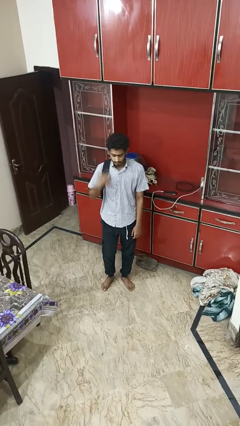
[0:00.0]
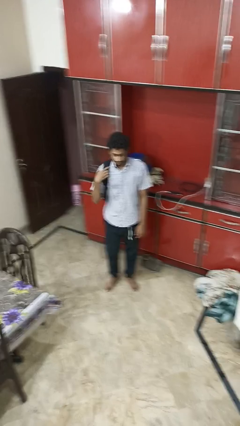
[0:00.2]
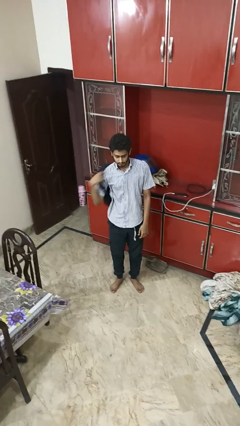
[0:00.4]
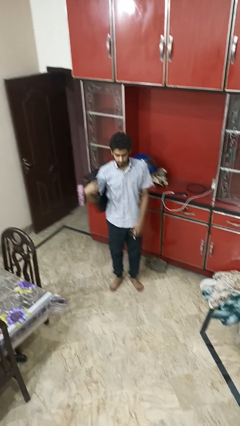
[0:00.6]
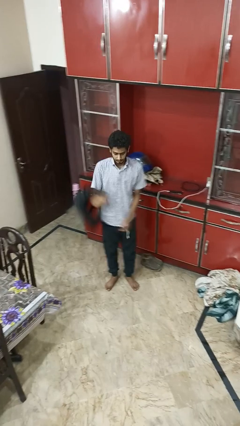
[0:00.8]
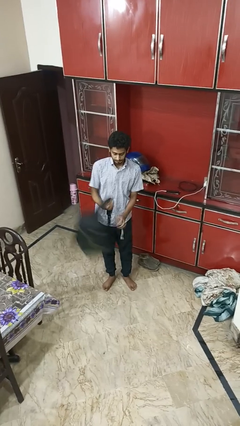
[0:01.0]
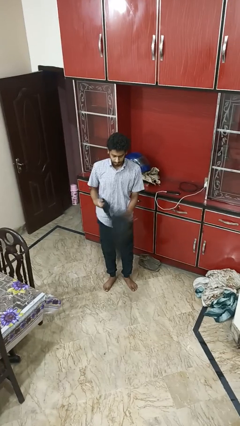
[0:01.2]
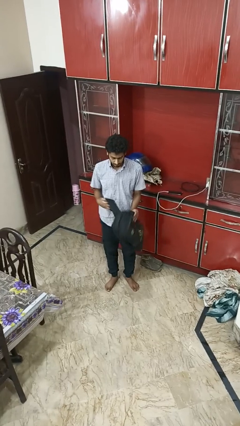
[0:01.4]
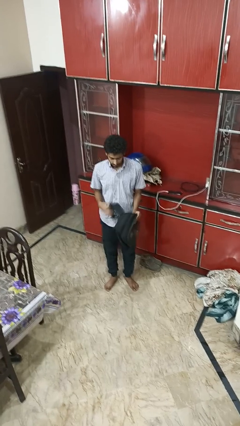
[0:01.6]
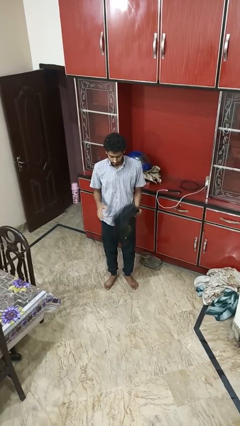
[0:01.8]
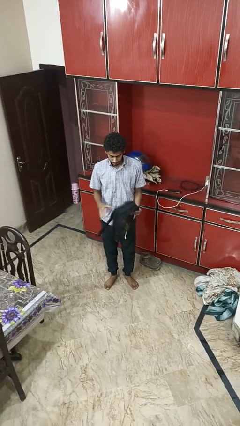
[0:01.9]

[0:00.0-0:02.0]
person takes off backpack

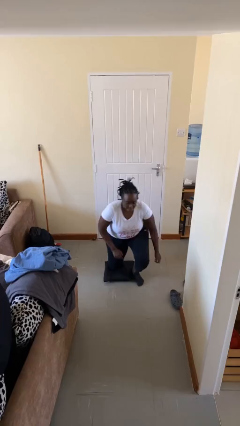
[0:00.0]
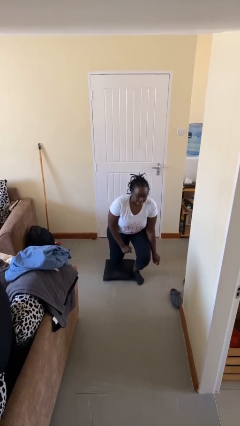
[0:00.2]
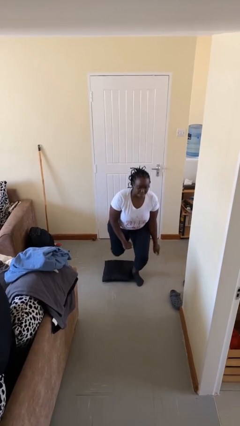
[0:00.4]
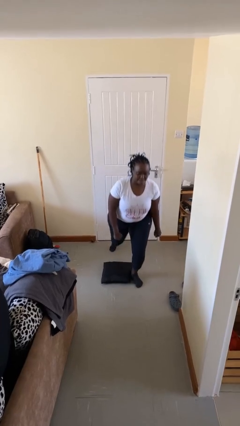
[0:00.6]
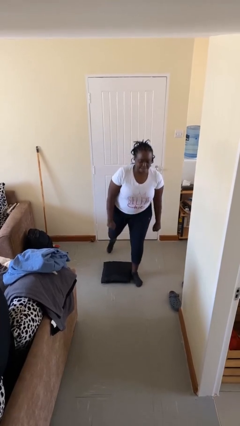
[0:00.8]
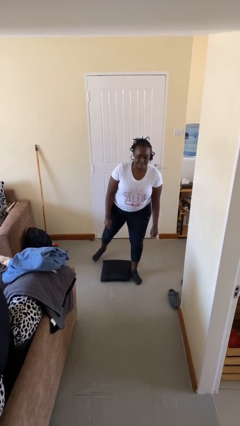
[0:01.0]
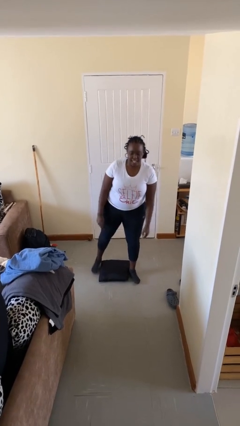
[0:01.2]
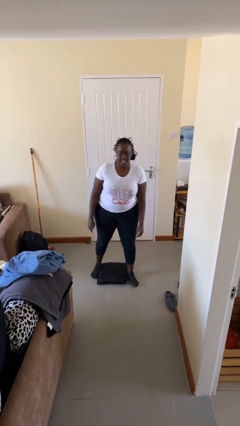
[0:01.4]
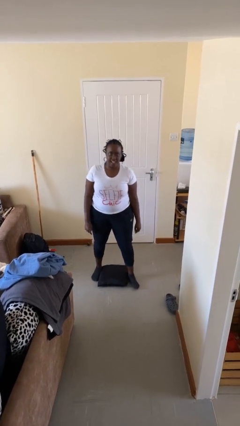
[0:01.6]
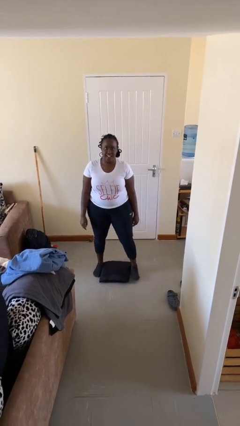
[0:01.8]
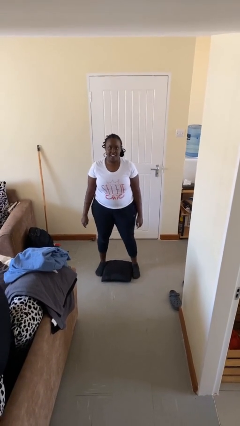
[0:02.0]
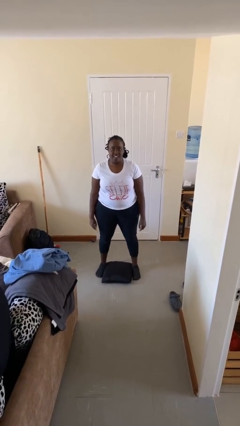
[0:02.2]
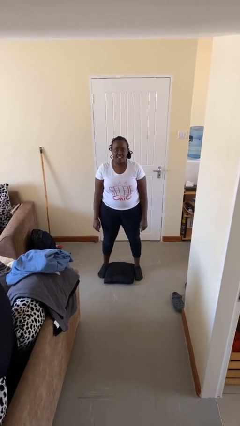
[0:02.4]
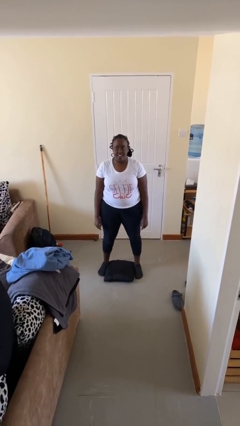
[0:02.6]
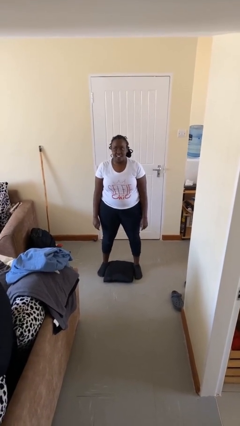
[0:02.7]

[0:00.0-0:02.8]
person stands up from floor

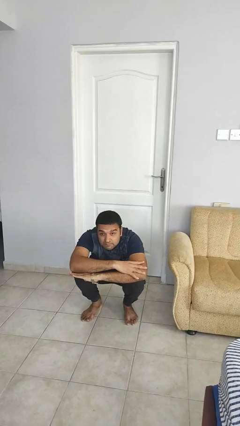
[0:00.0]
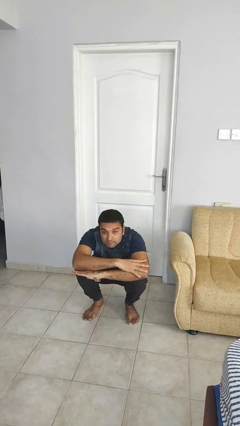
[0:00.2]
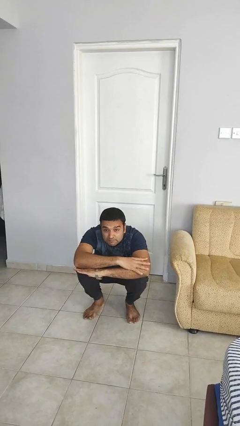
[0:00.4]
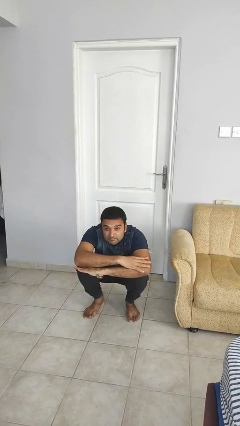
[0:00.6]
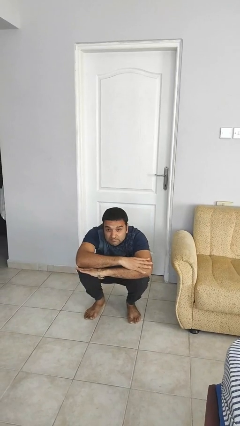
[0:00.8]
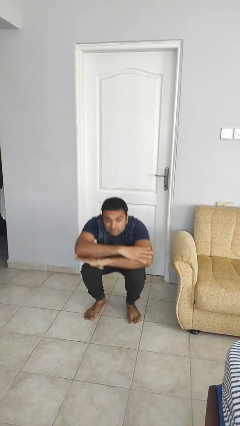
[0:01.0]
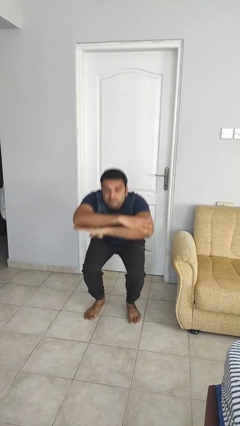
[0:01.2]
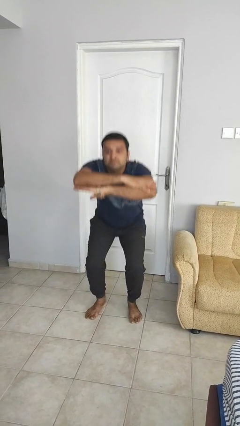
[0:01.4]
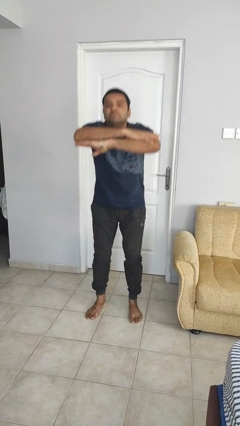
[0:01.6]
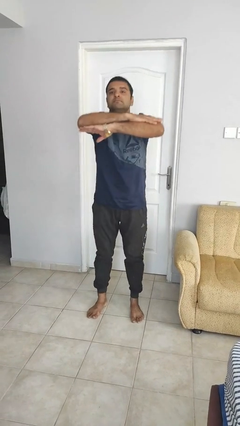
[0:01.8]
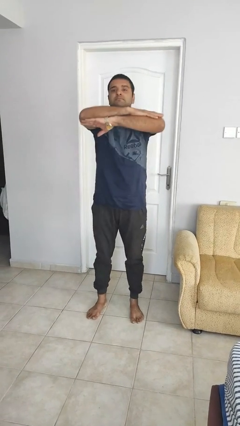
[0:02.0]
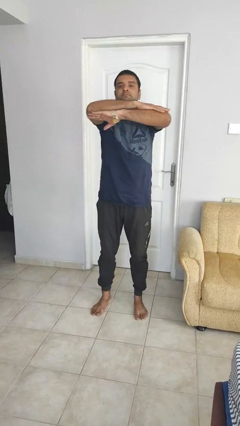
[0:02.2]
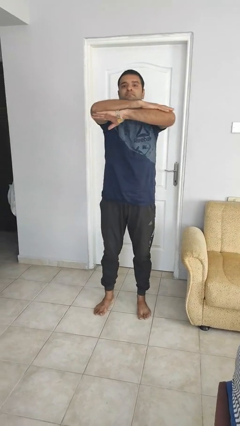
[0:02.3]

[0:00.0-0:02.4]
person stands up

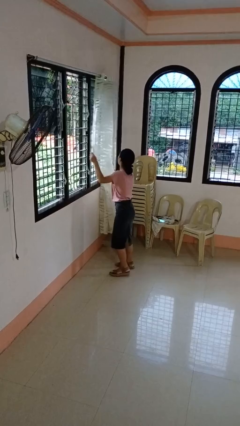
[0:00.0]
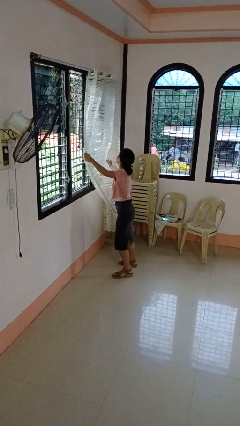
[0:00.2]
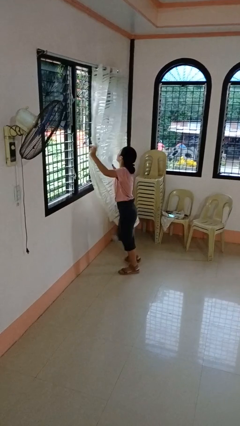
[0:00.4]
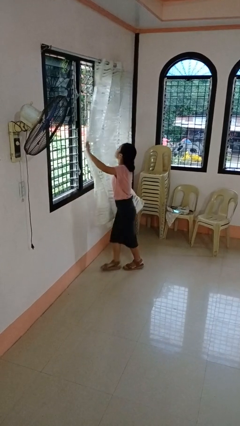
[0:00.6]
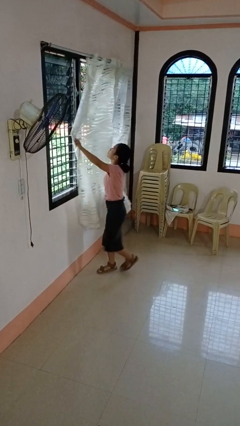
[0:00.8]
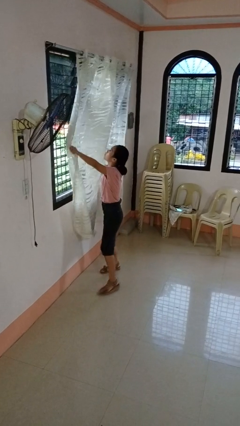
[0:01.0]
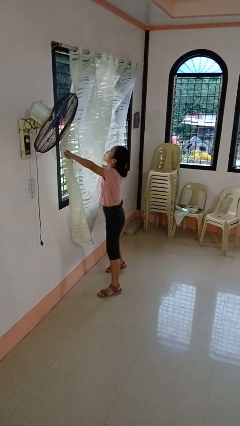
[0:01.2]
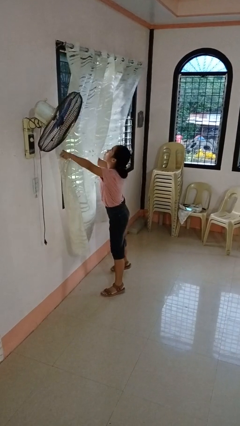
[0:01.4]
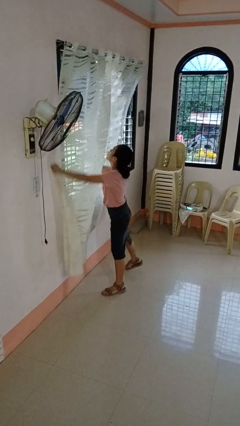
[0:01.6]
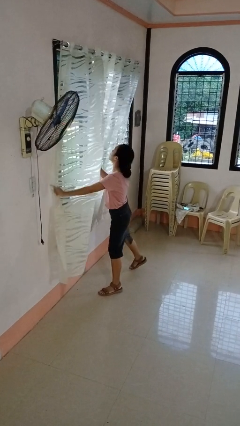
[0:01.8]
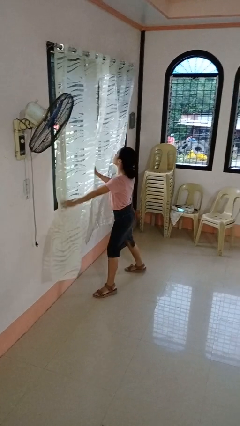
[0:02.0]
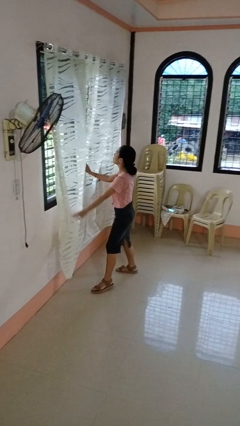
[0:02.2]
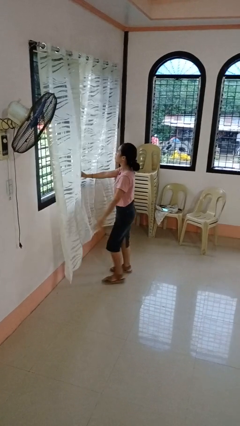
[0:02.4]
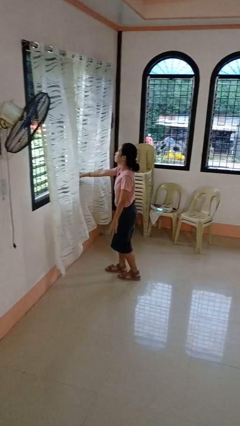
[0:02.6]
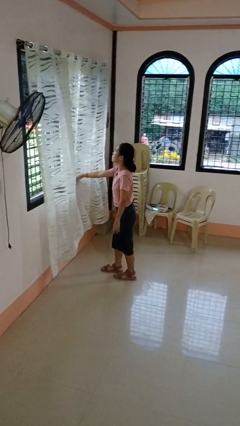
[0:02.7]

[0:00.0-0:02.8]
person closes curtains

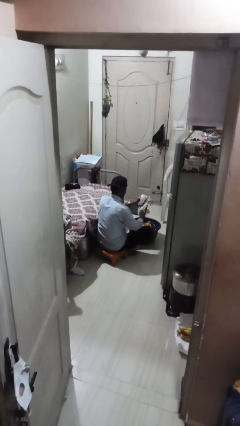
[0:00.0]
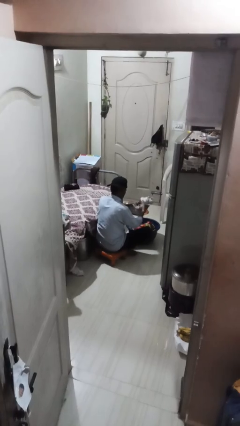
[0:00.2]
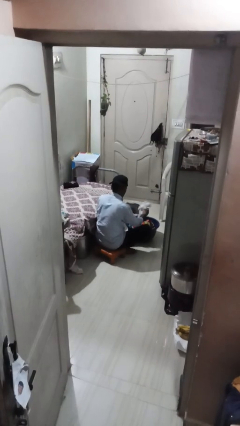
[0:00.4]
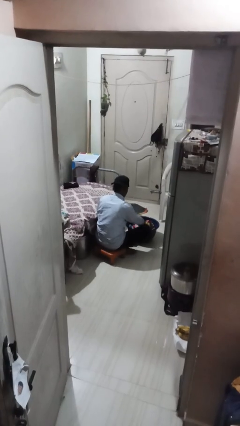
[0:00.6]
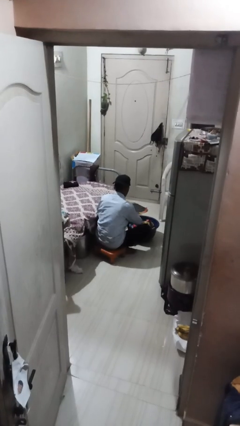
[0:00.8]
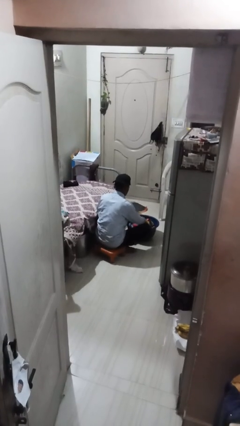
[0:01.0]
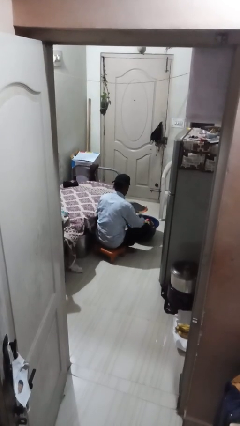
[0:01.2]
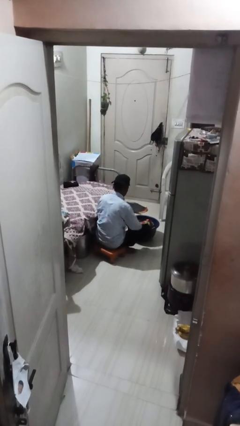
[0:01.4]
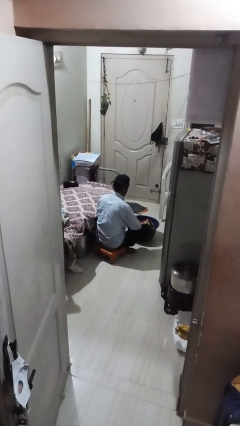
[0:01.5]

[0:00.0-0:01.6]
person puts object into basket

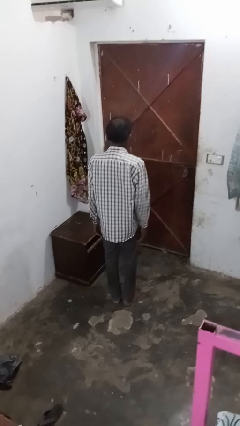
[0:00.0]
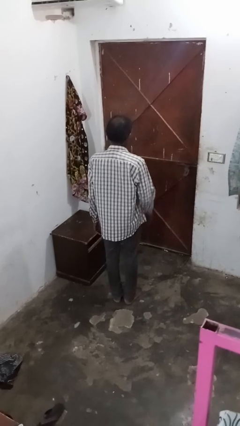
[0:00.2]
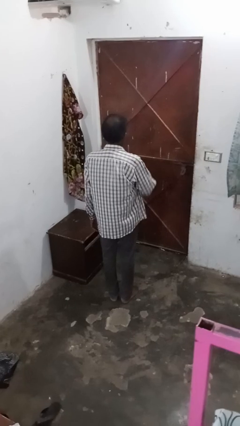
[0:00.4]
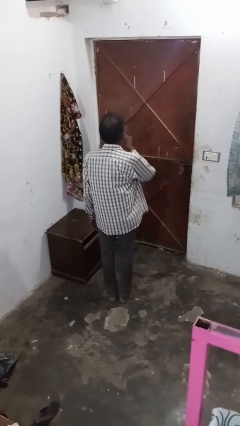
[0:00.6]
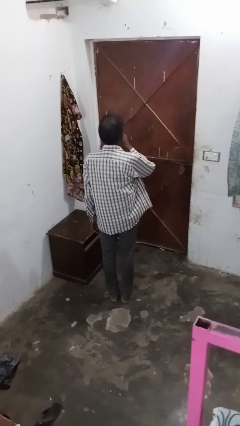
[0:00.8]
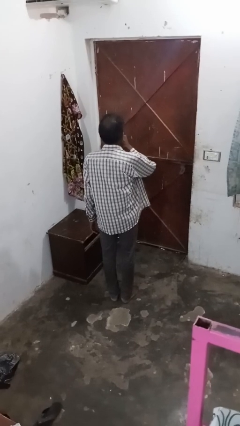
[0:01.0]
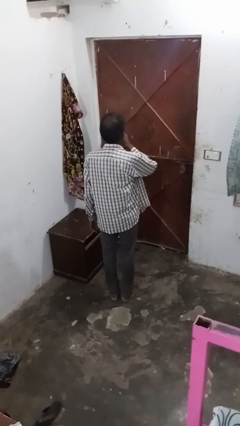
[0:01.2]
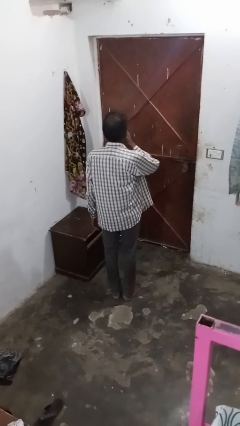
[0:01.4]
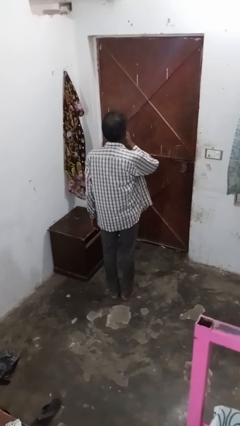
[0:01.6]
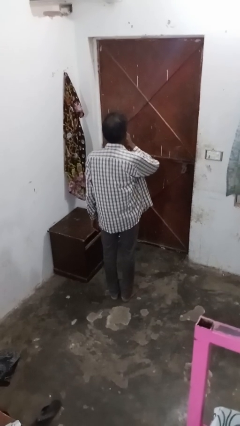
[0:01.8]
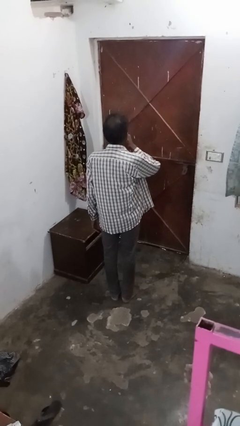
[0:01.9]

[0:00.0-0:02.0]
person gestures be quiet

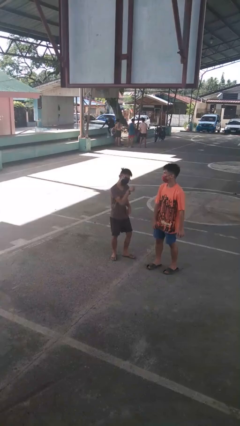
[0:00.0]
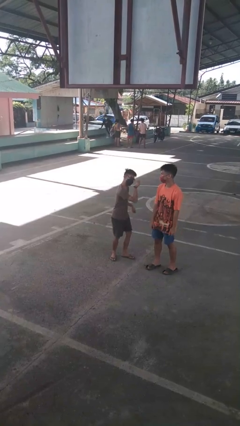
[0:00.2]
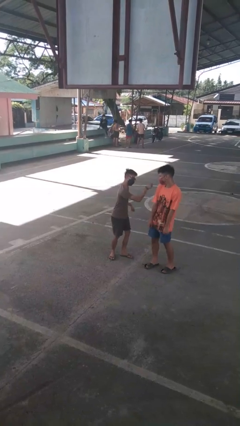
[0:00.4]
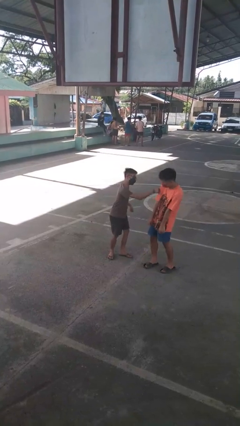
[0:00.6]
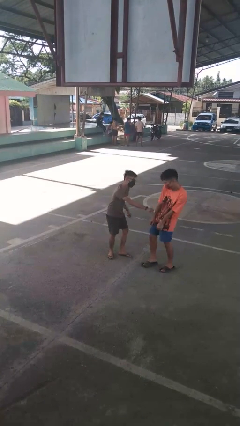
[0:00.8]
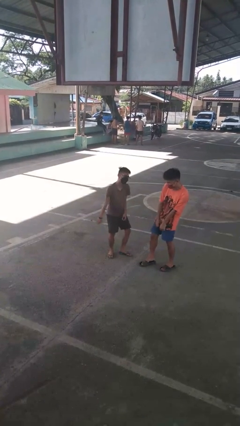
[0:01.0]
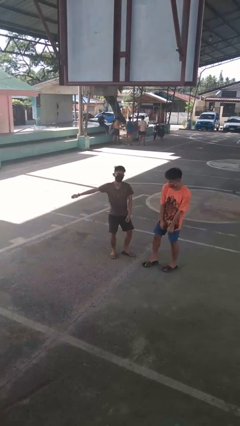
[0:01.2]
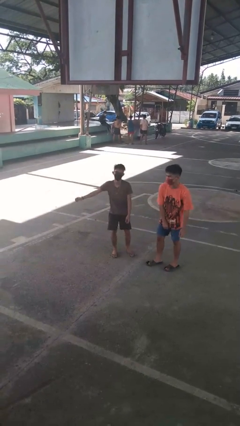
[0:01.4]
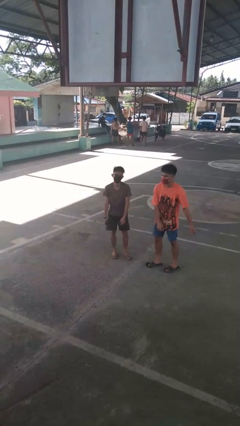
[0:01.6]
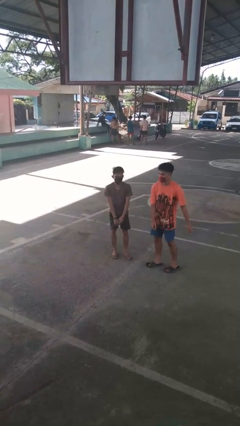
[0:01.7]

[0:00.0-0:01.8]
person pounds shoulders of person

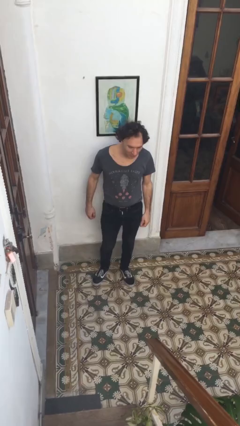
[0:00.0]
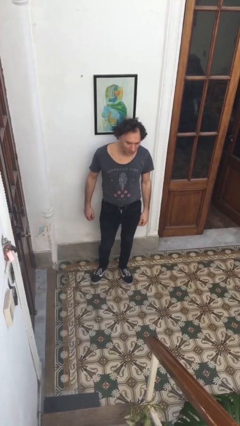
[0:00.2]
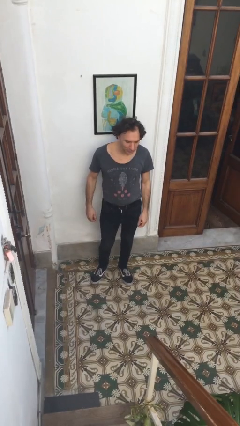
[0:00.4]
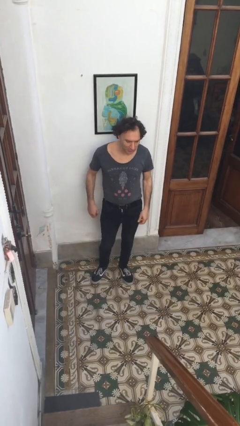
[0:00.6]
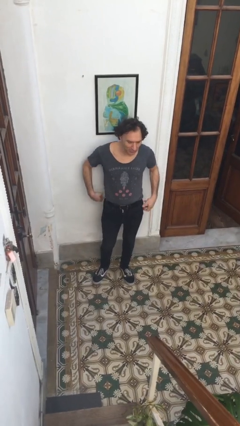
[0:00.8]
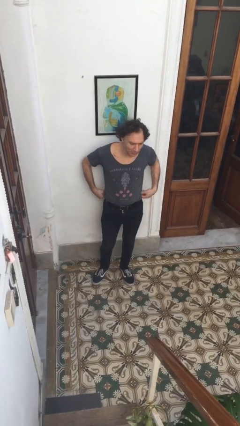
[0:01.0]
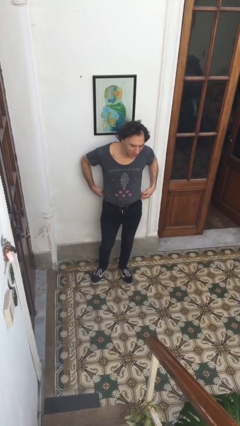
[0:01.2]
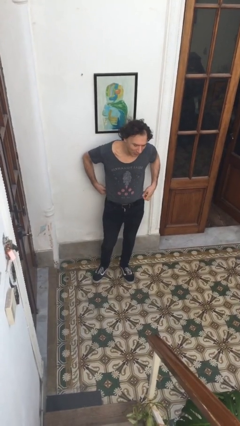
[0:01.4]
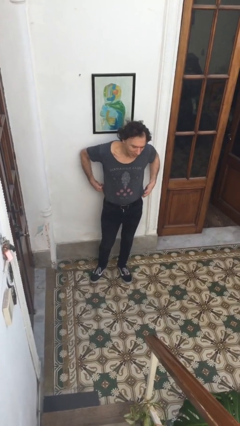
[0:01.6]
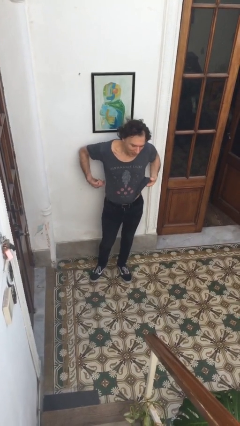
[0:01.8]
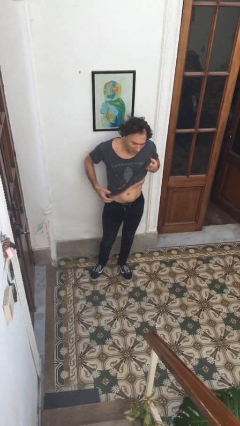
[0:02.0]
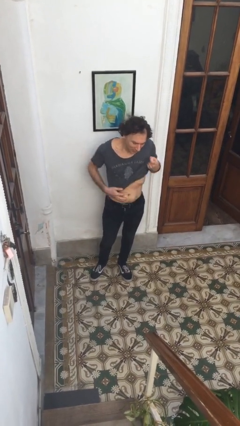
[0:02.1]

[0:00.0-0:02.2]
person untucks shirt
